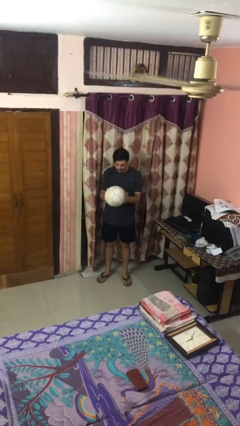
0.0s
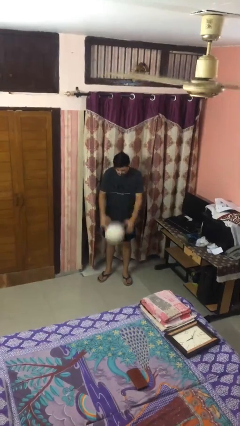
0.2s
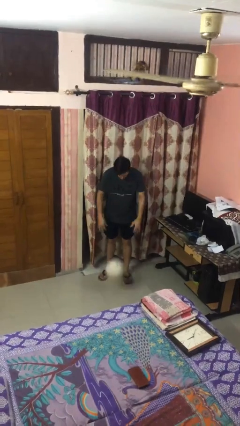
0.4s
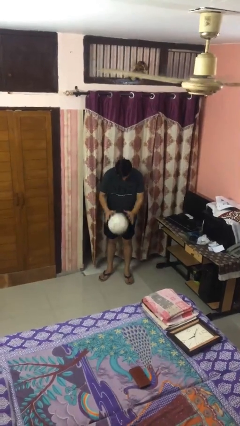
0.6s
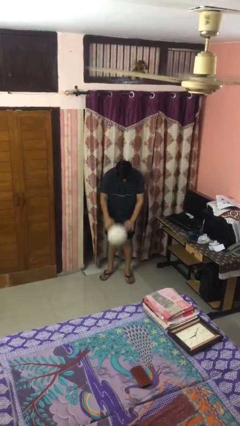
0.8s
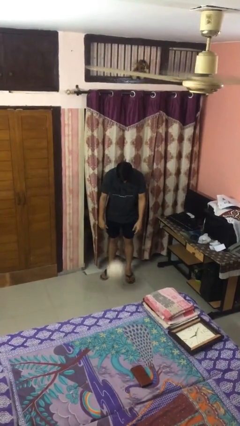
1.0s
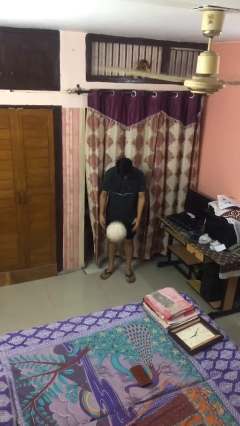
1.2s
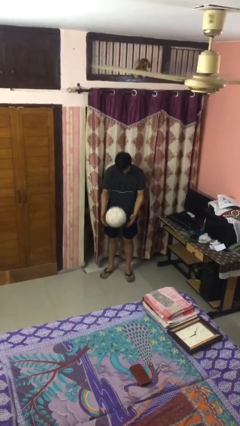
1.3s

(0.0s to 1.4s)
person bounces ball on floor

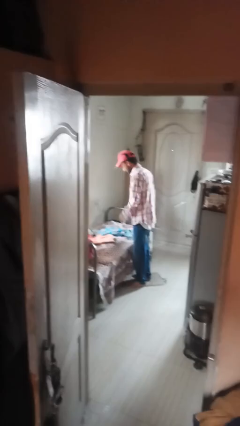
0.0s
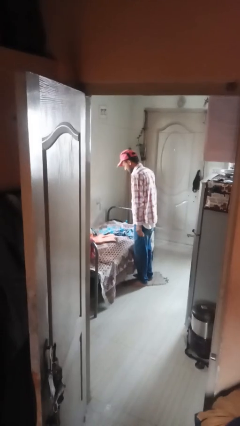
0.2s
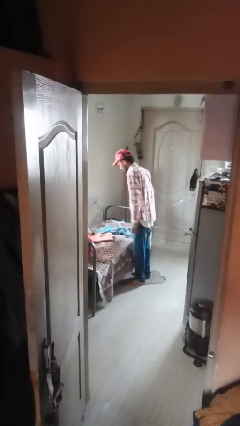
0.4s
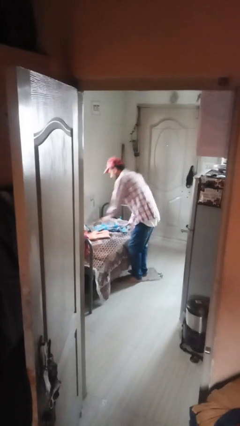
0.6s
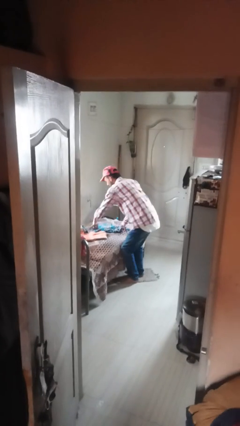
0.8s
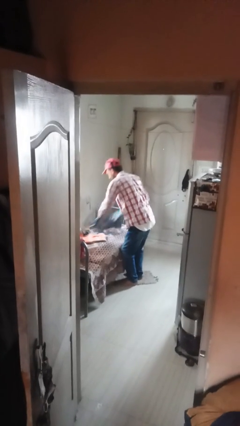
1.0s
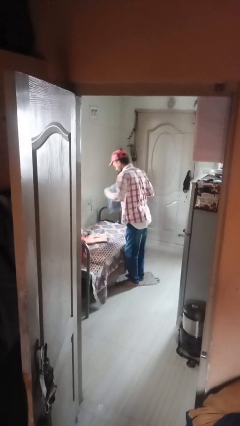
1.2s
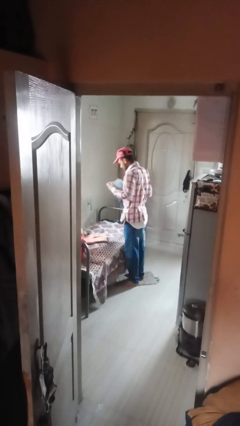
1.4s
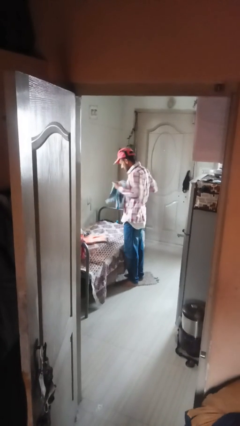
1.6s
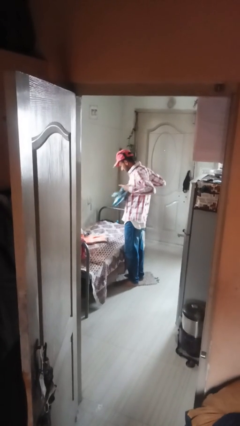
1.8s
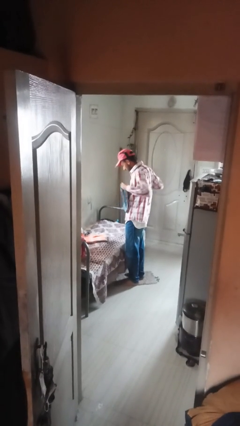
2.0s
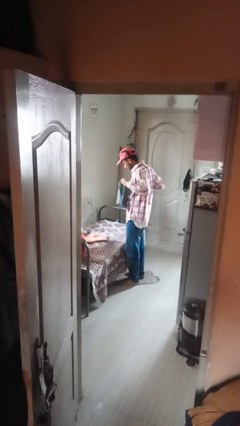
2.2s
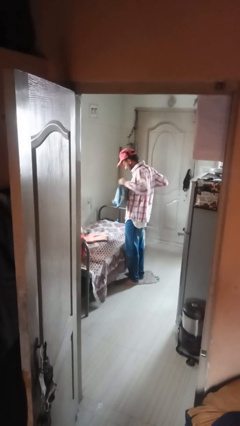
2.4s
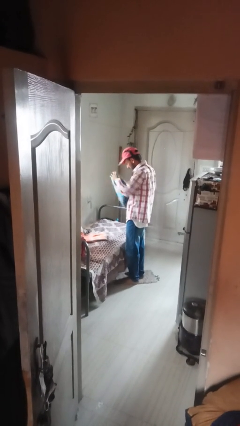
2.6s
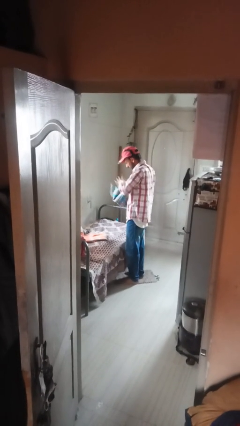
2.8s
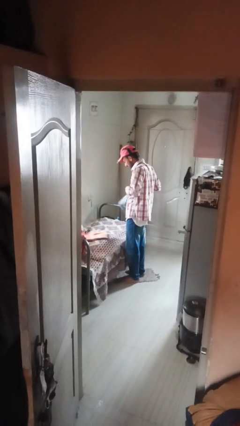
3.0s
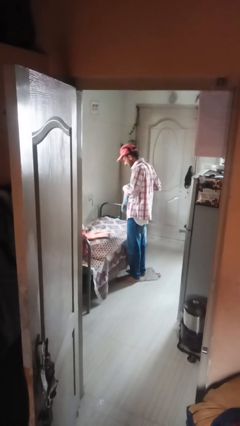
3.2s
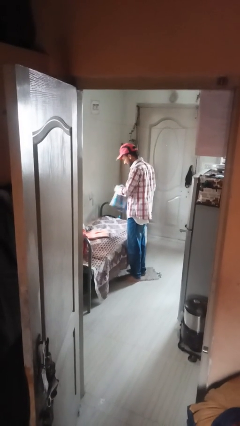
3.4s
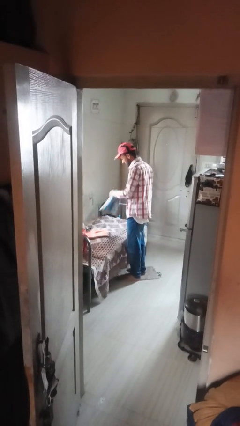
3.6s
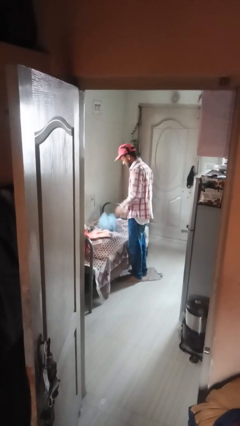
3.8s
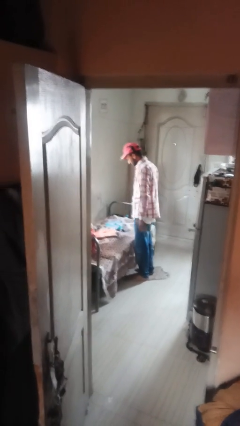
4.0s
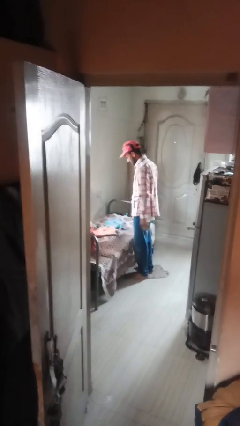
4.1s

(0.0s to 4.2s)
person folds towel

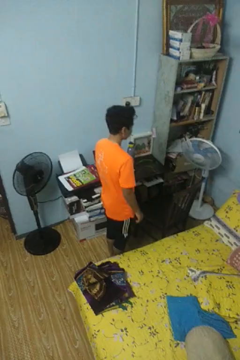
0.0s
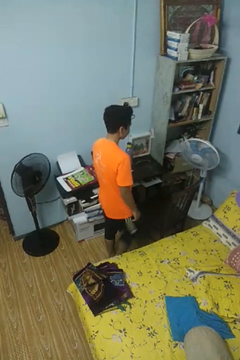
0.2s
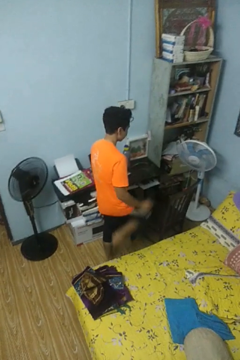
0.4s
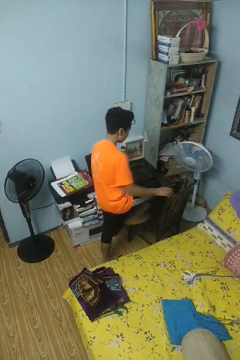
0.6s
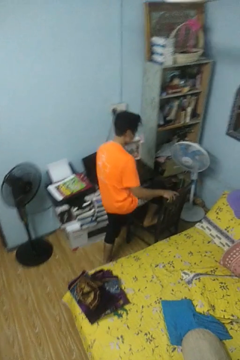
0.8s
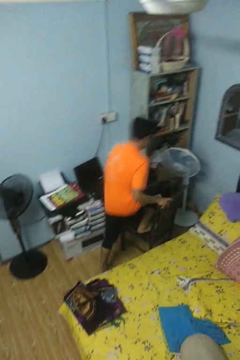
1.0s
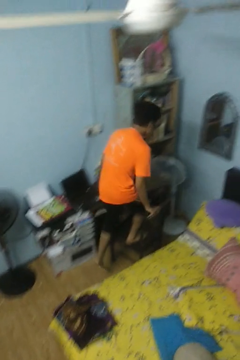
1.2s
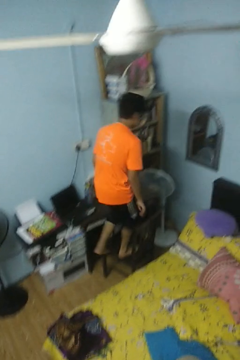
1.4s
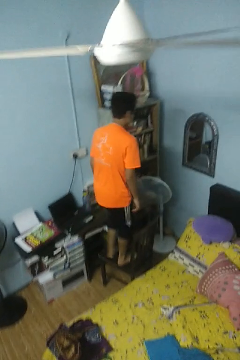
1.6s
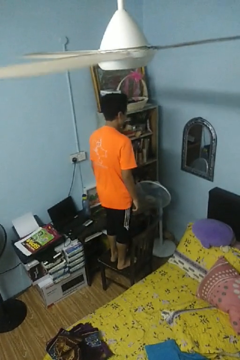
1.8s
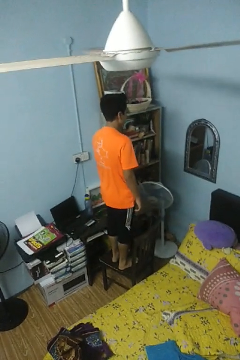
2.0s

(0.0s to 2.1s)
person climbs on chair

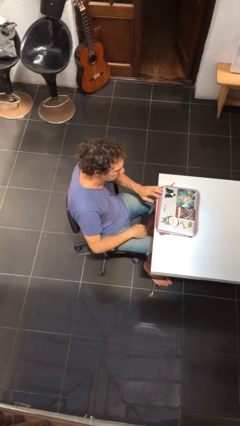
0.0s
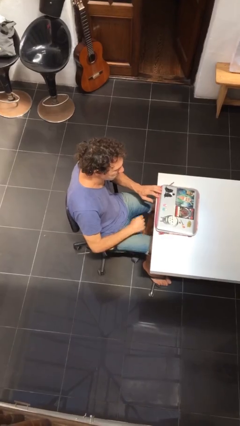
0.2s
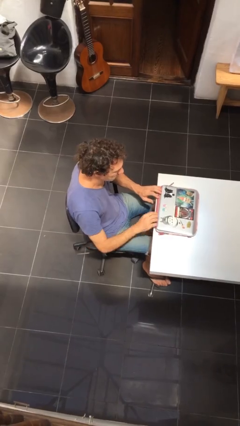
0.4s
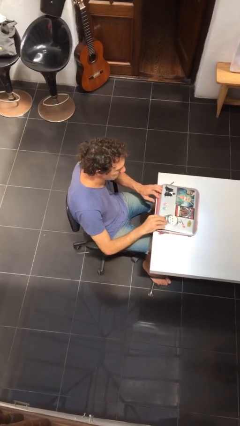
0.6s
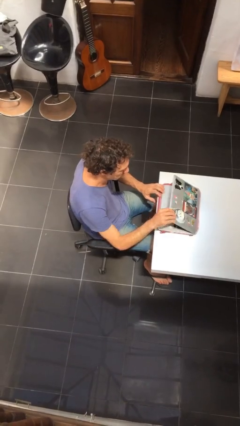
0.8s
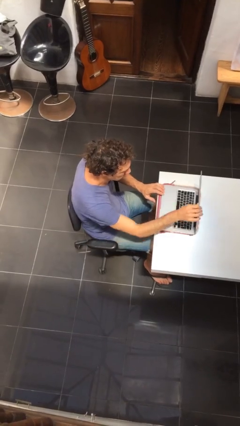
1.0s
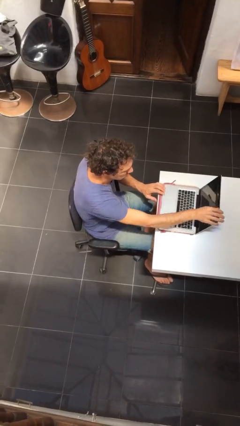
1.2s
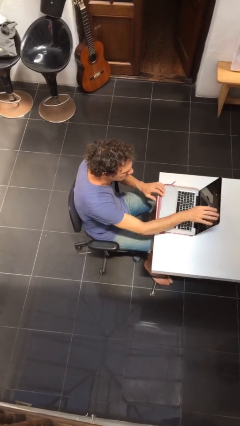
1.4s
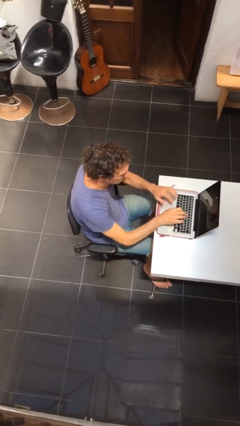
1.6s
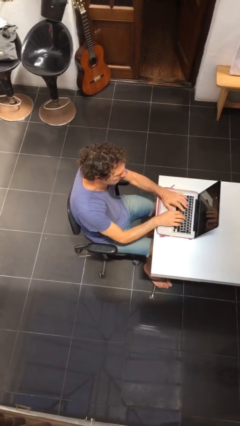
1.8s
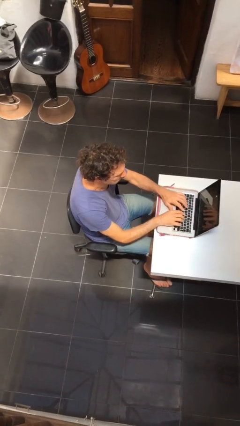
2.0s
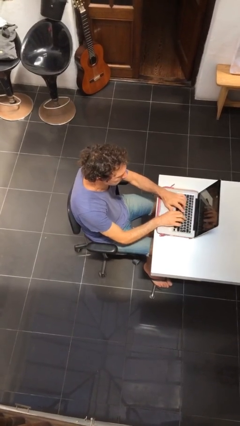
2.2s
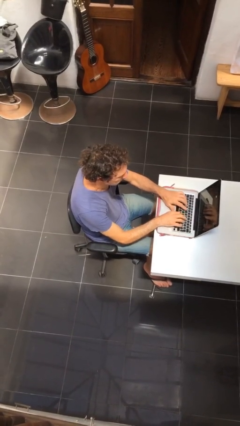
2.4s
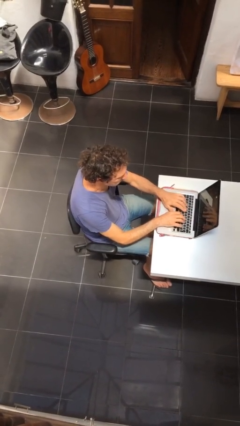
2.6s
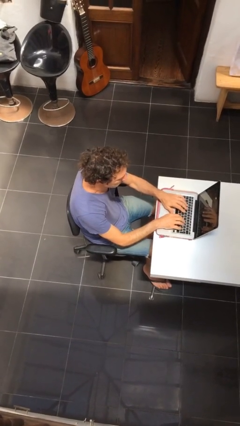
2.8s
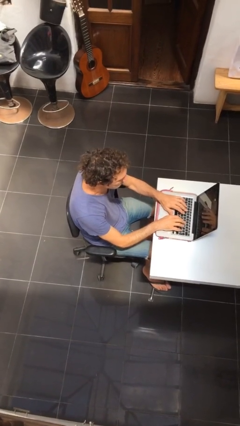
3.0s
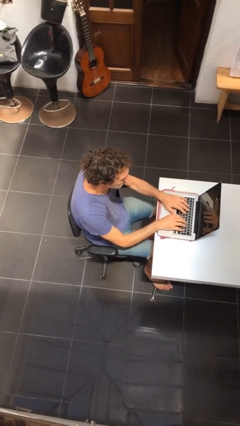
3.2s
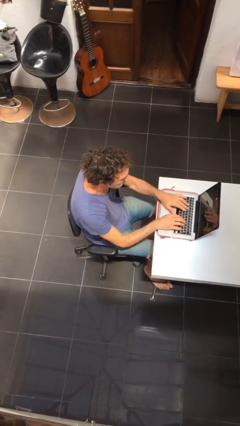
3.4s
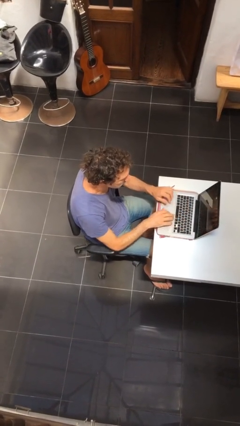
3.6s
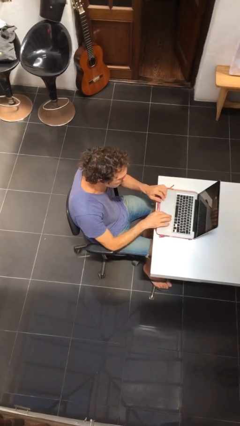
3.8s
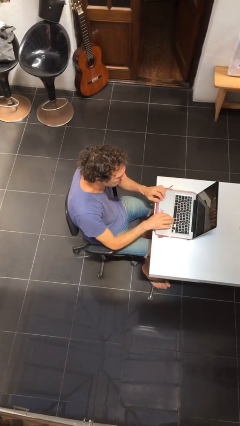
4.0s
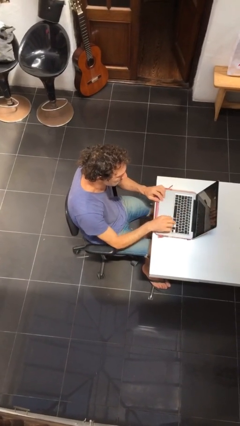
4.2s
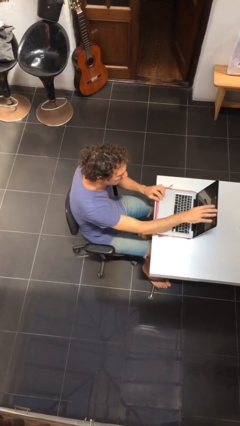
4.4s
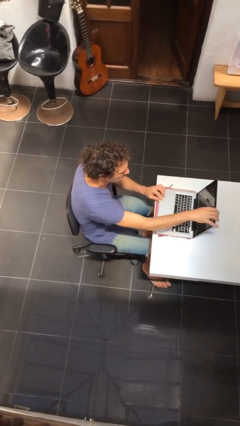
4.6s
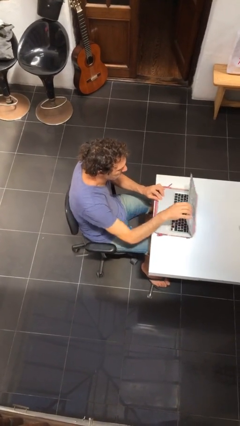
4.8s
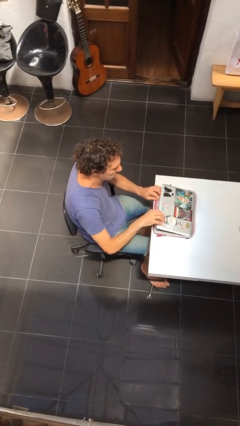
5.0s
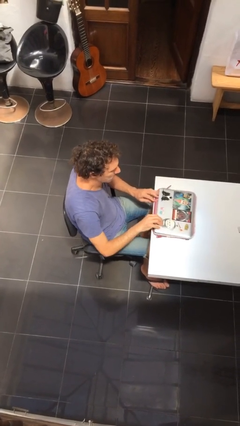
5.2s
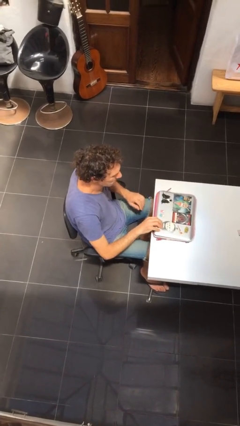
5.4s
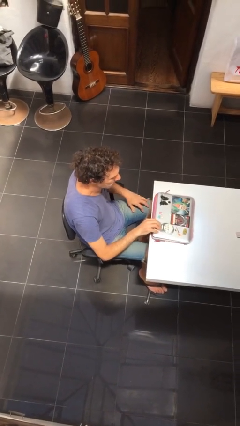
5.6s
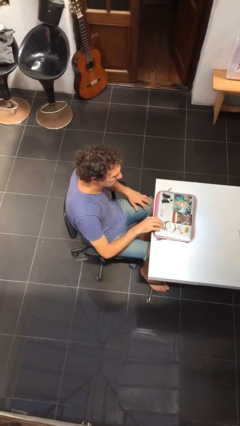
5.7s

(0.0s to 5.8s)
person interacts with laptop

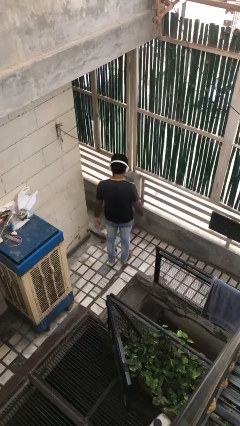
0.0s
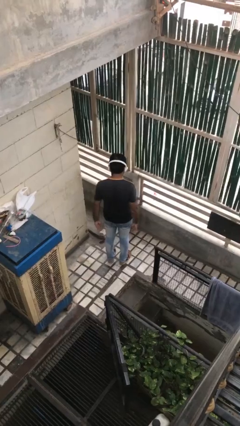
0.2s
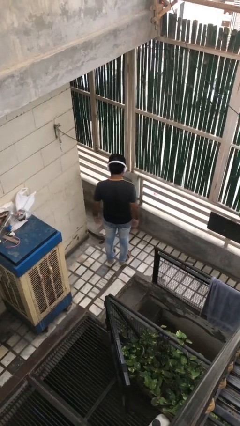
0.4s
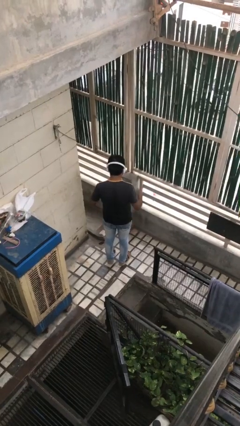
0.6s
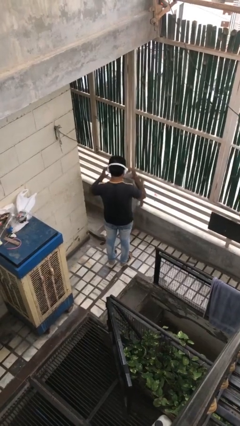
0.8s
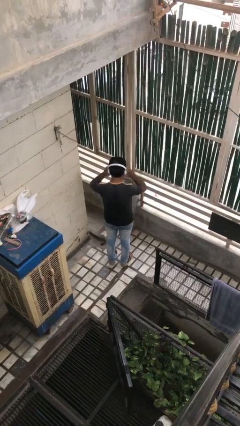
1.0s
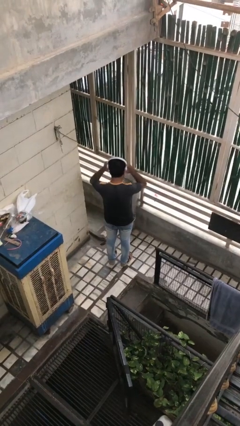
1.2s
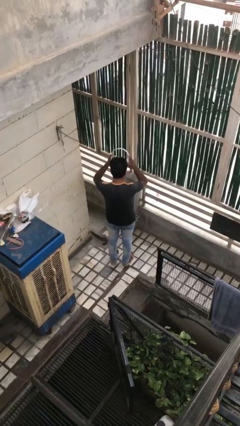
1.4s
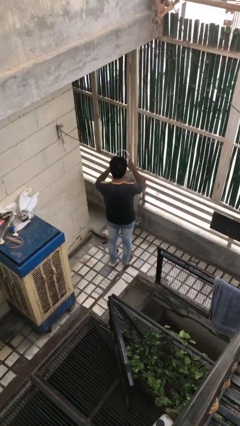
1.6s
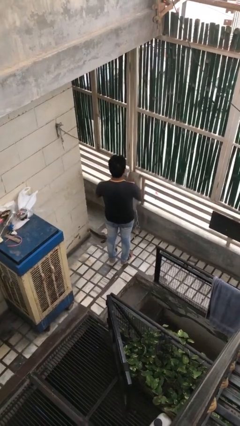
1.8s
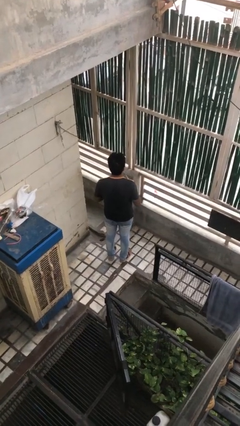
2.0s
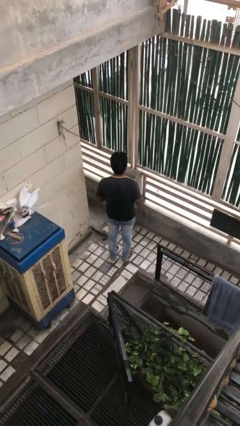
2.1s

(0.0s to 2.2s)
person takes off headphones

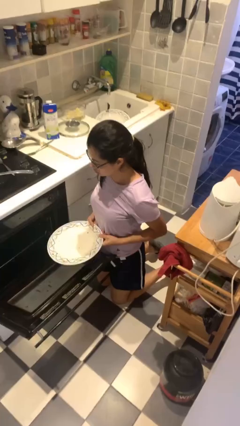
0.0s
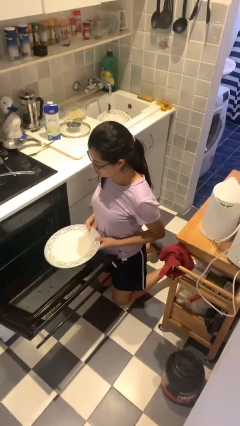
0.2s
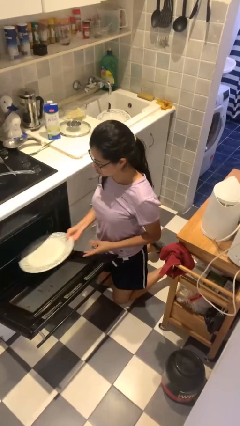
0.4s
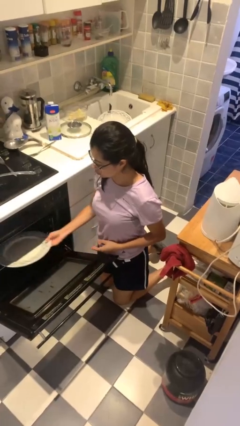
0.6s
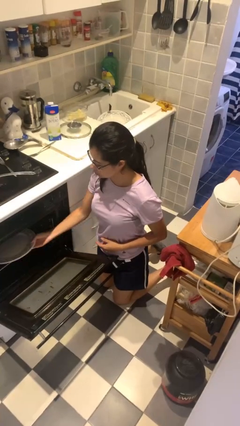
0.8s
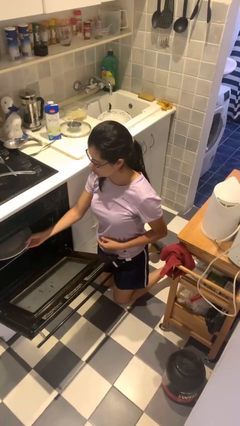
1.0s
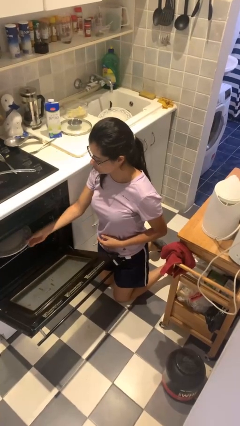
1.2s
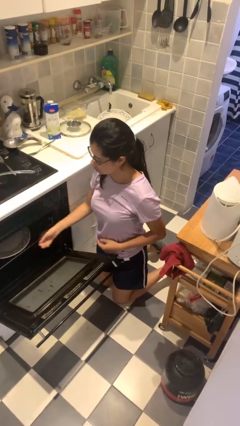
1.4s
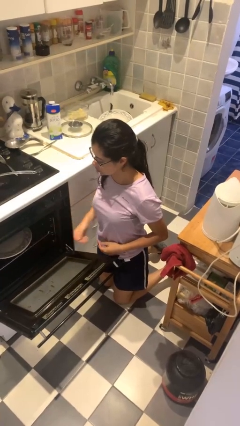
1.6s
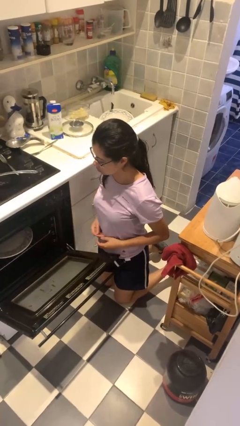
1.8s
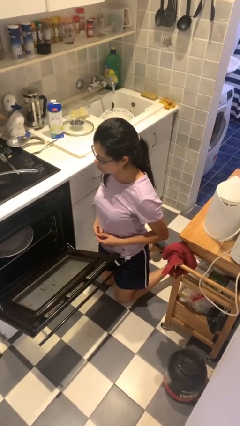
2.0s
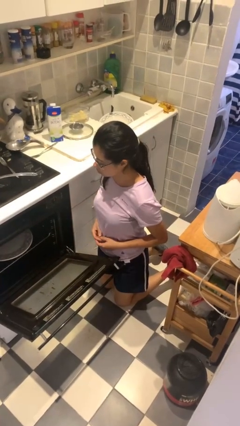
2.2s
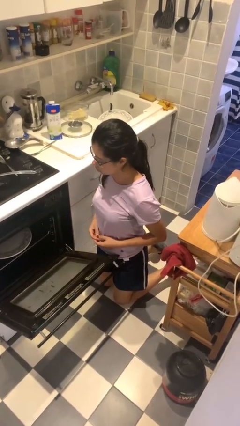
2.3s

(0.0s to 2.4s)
person loads dishwasher
